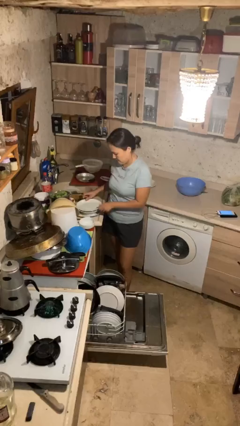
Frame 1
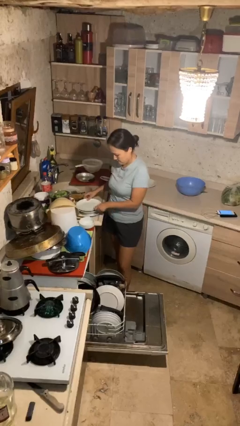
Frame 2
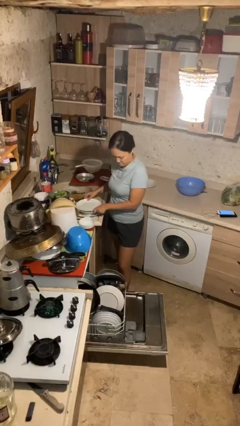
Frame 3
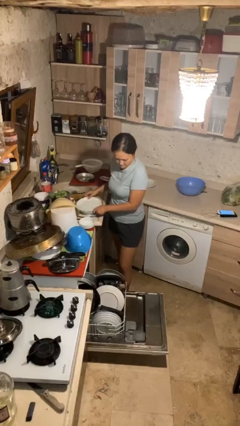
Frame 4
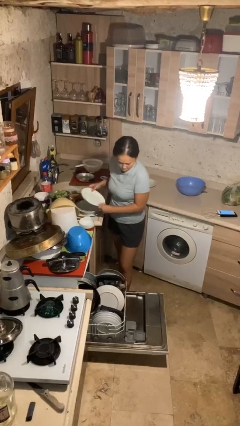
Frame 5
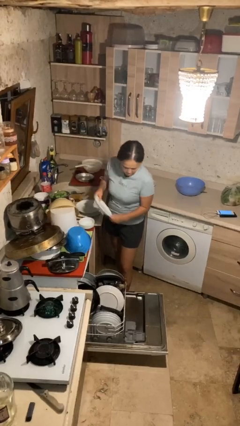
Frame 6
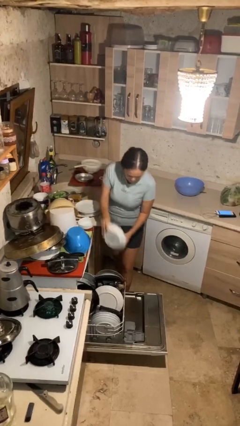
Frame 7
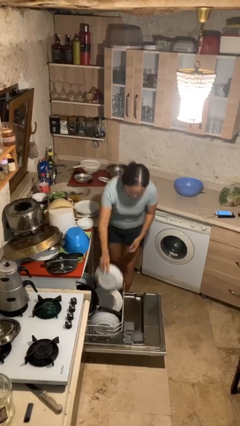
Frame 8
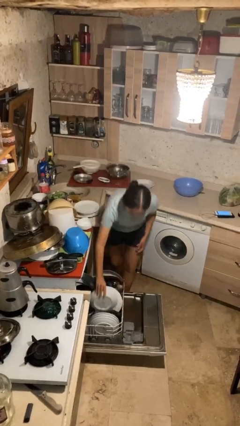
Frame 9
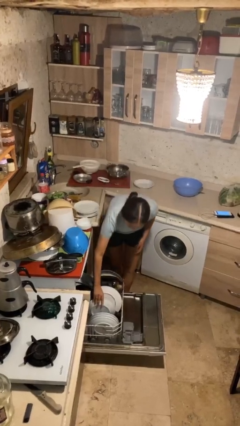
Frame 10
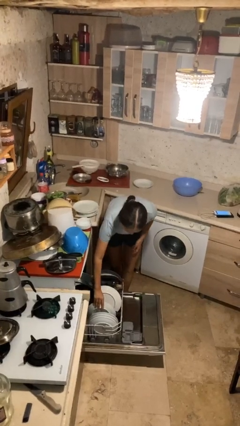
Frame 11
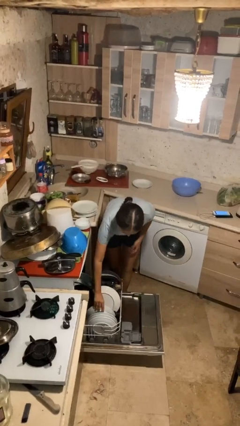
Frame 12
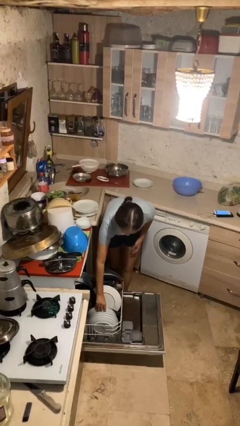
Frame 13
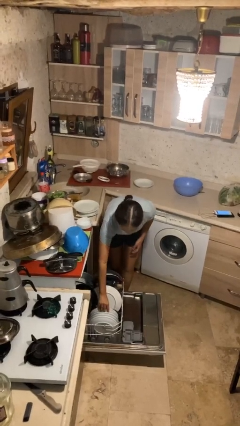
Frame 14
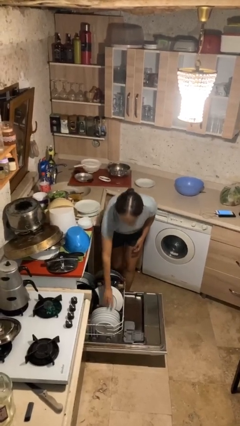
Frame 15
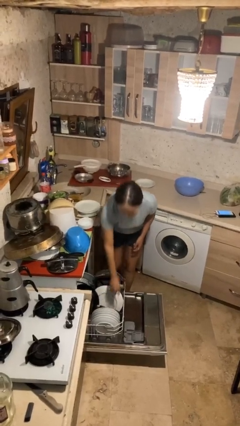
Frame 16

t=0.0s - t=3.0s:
person loads dishwasher

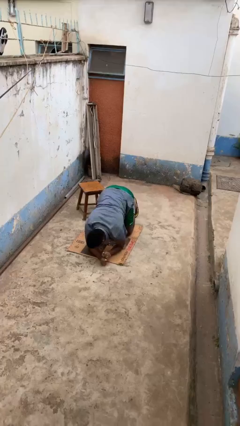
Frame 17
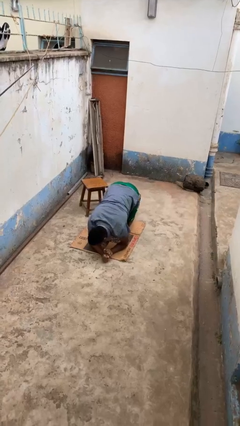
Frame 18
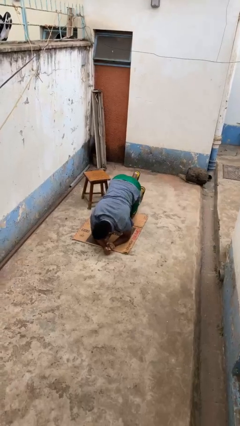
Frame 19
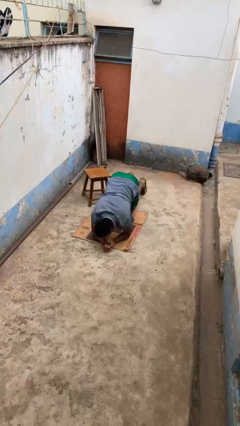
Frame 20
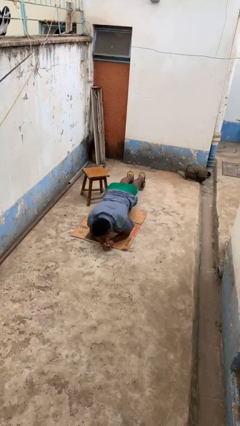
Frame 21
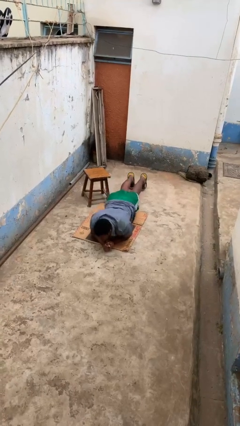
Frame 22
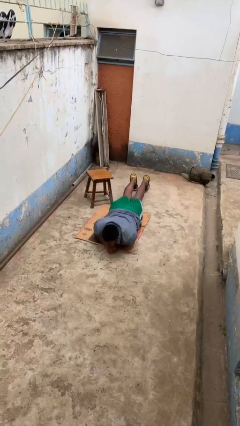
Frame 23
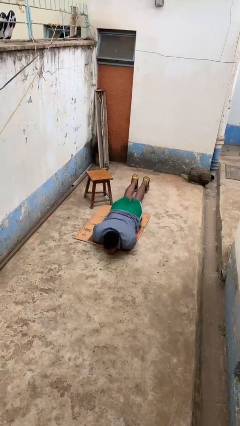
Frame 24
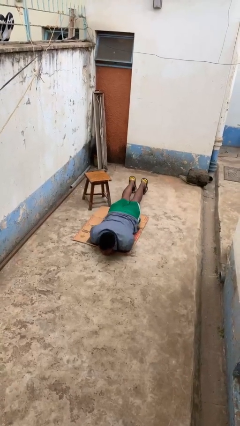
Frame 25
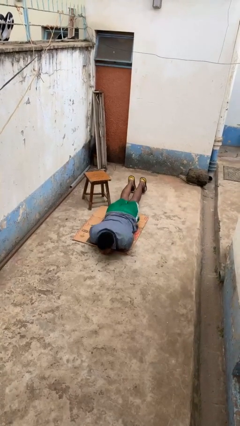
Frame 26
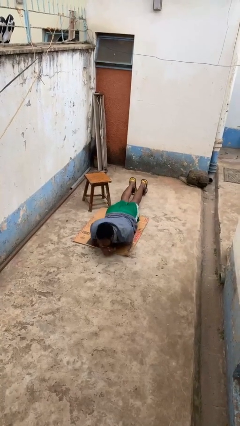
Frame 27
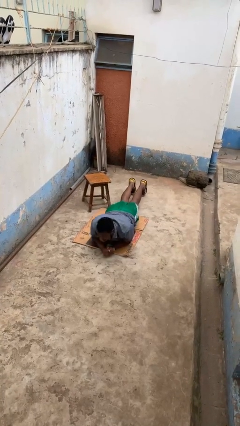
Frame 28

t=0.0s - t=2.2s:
person lies down on floor

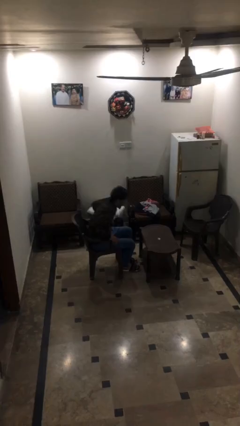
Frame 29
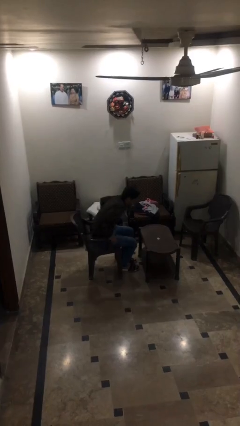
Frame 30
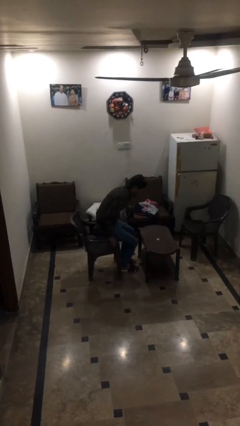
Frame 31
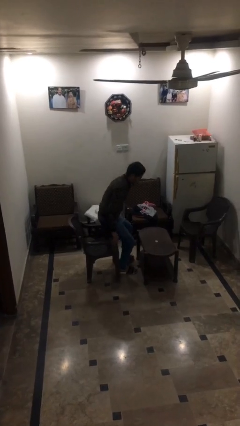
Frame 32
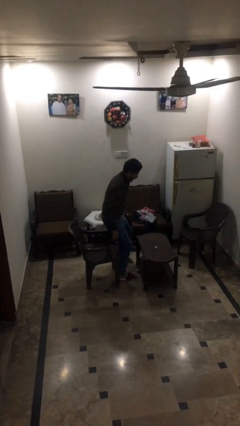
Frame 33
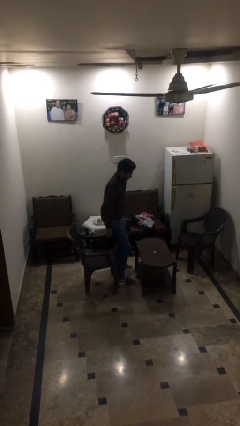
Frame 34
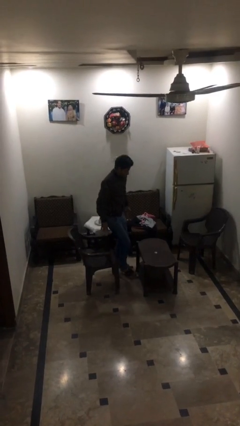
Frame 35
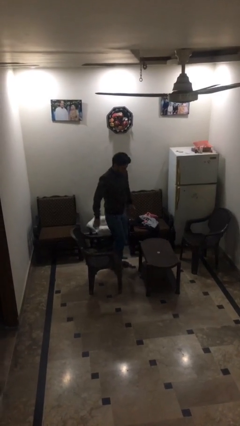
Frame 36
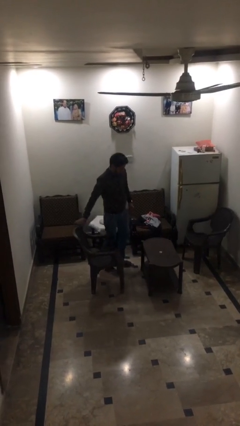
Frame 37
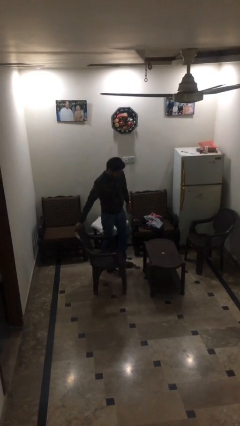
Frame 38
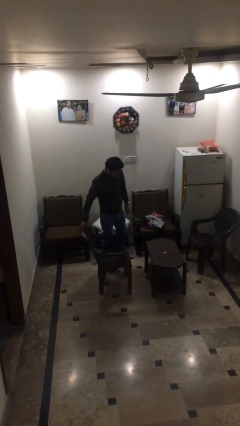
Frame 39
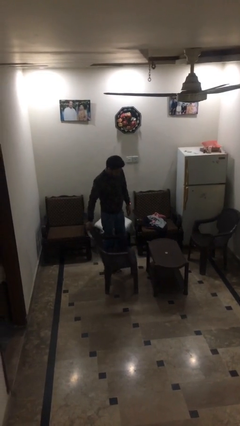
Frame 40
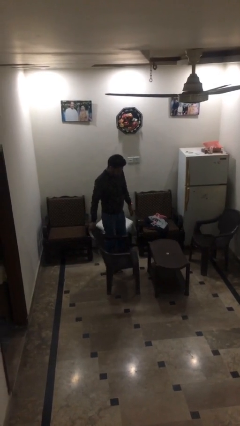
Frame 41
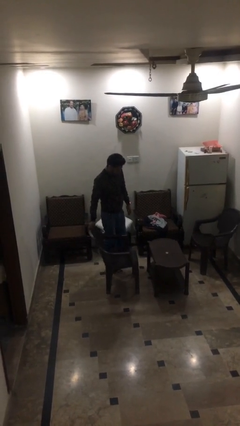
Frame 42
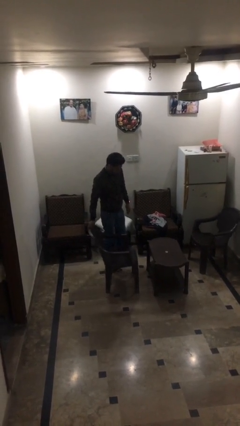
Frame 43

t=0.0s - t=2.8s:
person stands up

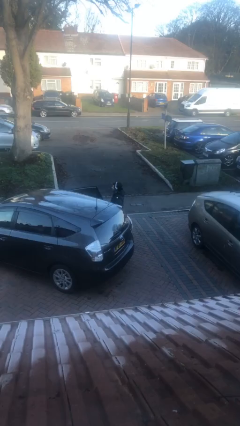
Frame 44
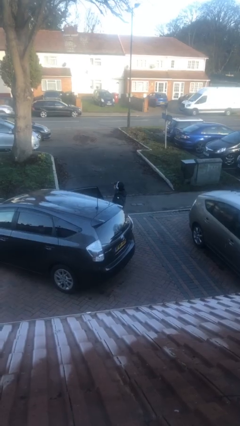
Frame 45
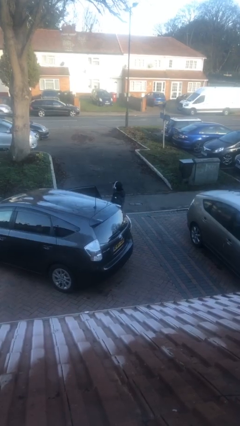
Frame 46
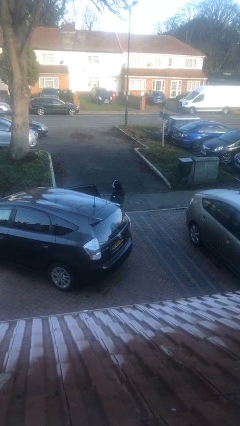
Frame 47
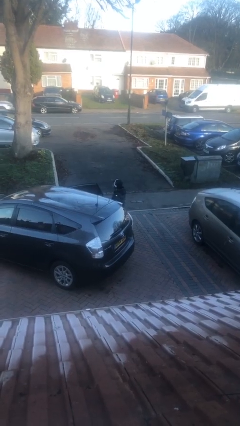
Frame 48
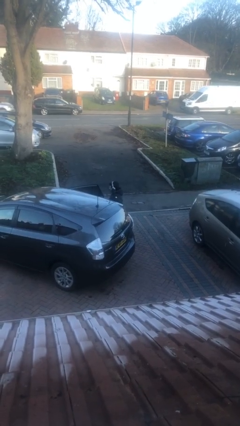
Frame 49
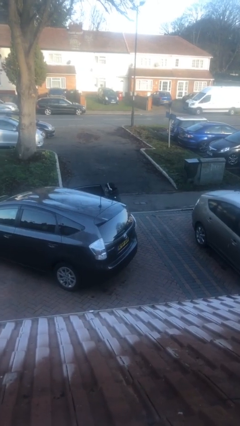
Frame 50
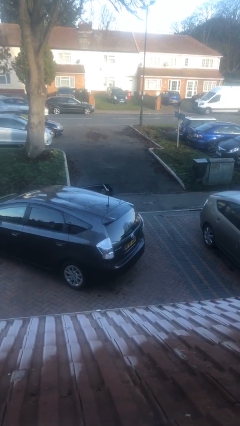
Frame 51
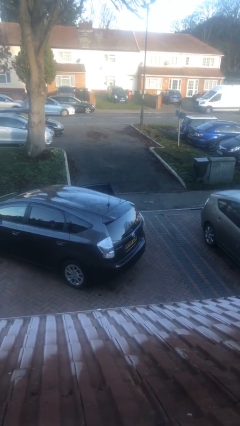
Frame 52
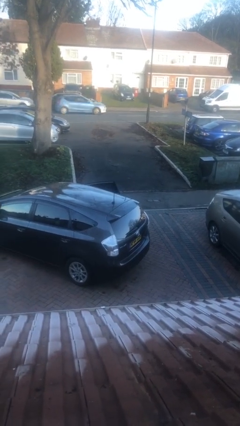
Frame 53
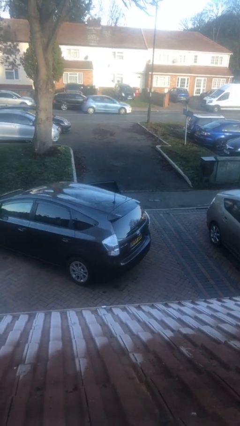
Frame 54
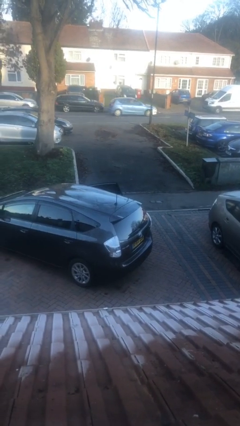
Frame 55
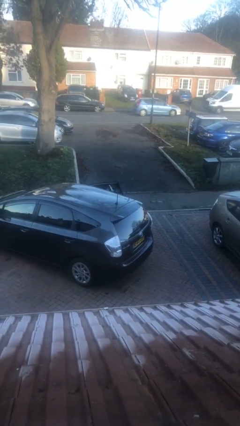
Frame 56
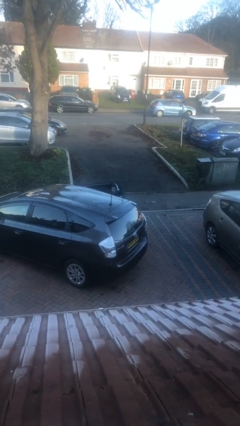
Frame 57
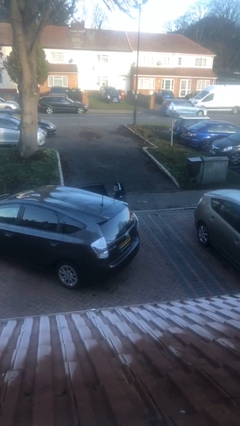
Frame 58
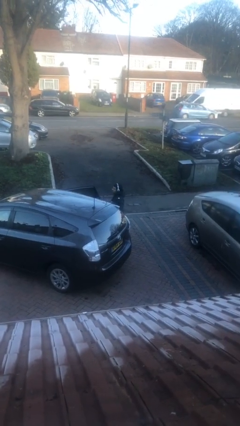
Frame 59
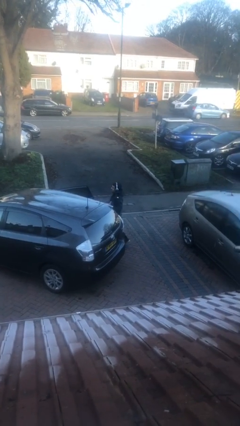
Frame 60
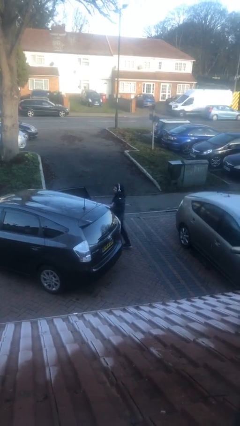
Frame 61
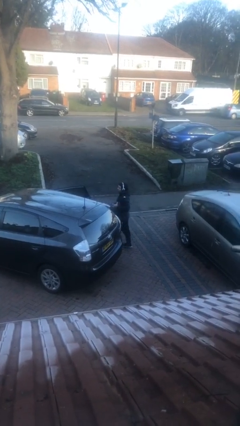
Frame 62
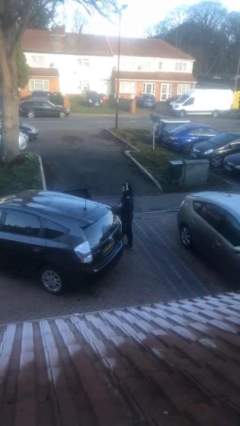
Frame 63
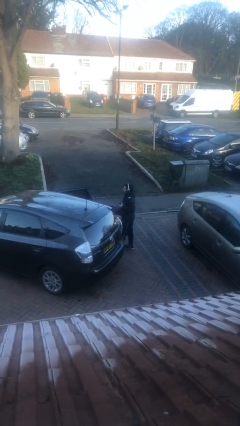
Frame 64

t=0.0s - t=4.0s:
person unloads car

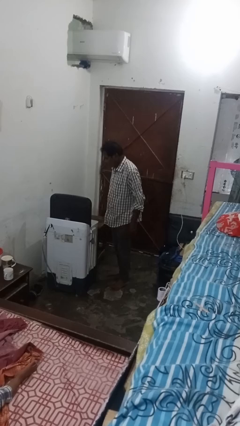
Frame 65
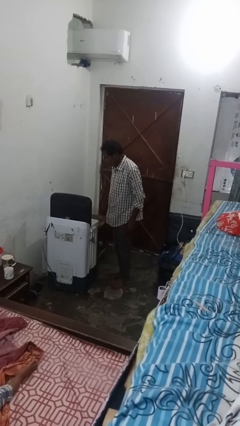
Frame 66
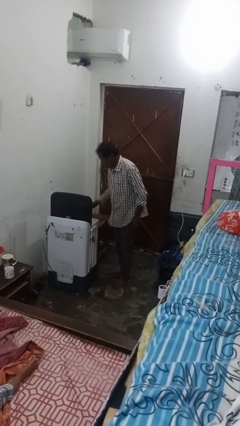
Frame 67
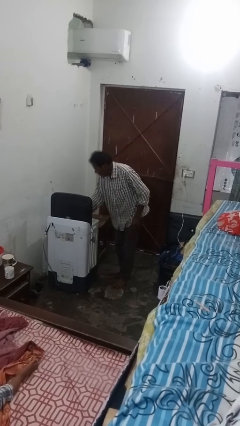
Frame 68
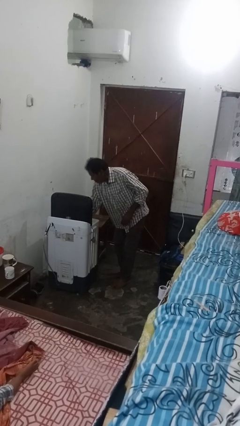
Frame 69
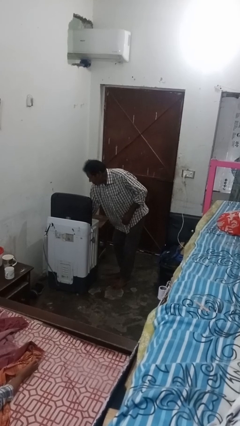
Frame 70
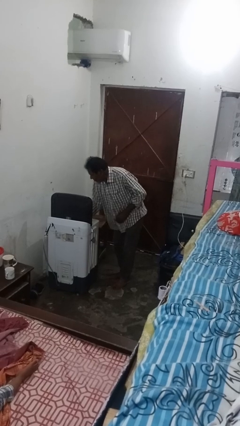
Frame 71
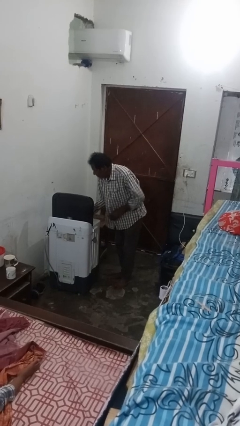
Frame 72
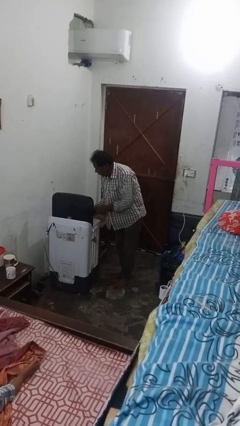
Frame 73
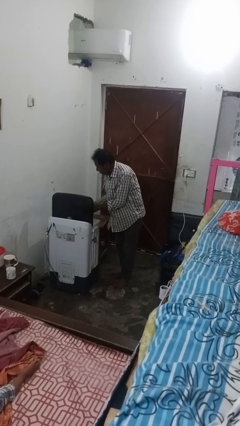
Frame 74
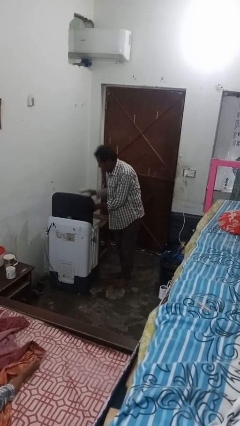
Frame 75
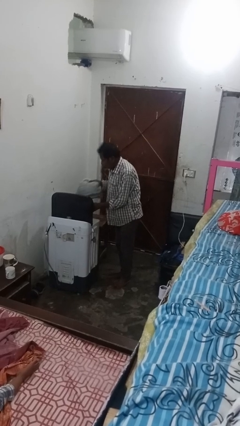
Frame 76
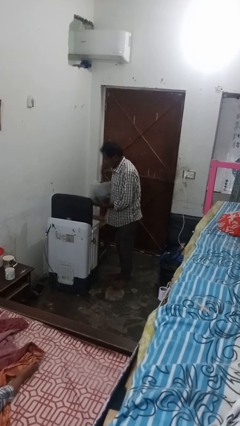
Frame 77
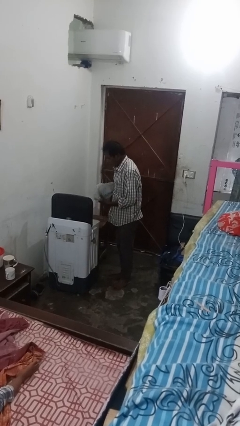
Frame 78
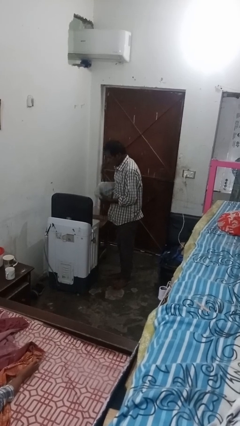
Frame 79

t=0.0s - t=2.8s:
person unloads dryer

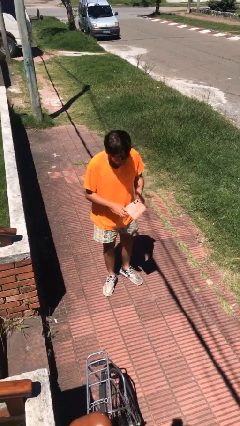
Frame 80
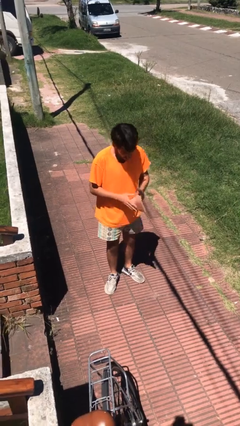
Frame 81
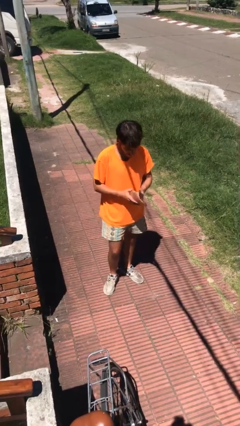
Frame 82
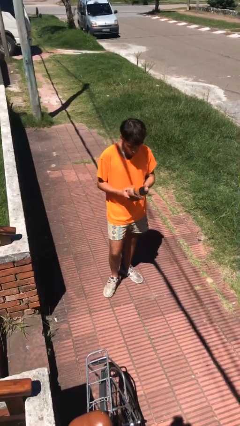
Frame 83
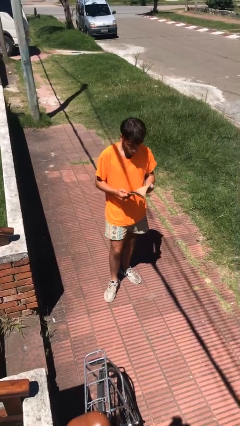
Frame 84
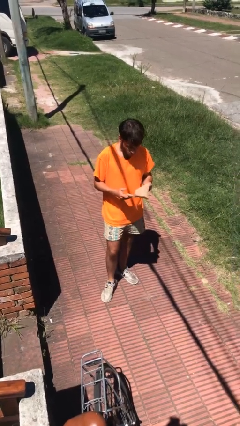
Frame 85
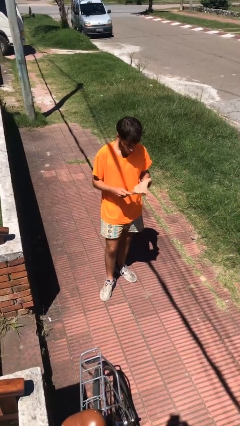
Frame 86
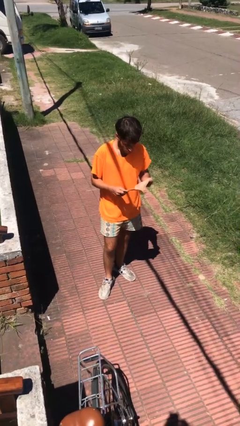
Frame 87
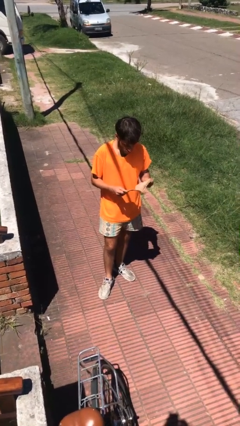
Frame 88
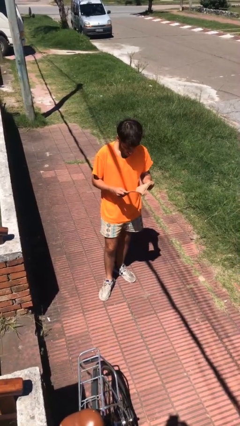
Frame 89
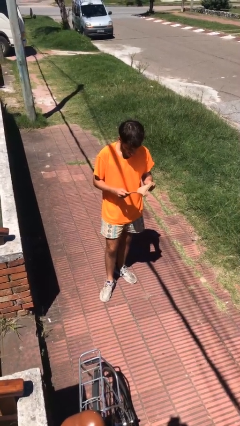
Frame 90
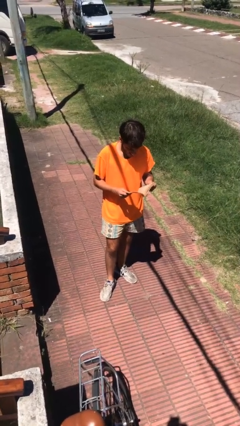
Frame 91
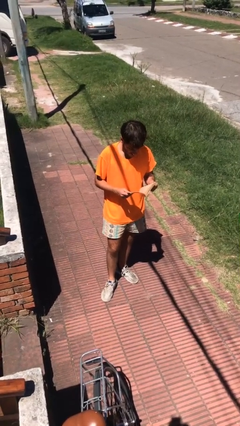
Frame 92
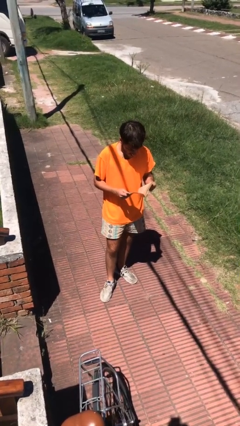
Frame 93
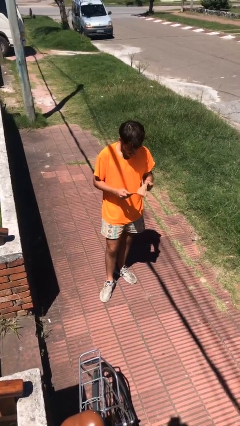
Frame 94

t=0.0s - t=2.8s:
person reads document
